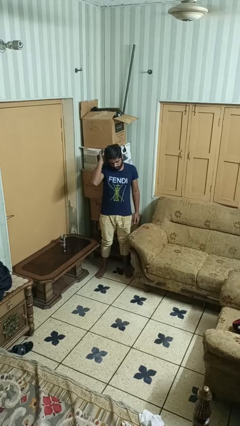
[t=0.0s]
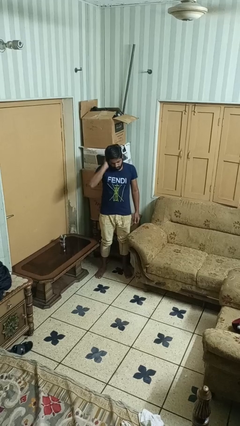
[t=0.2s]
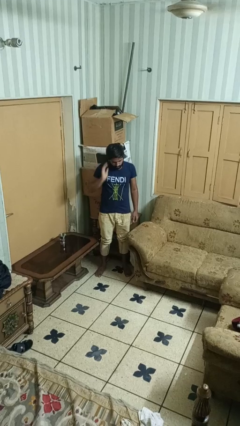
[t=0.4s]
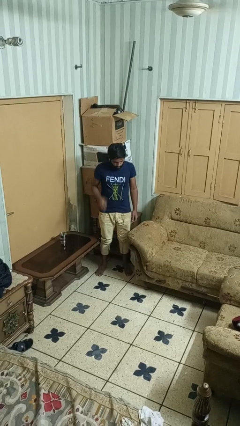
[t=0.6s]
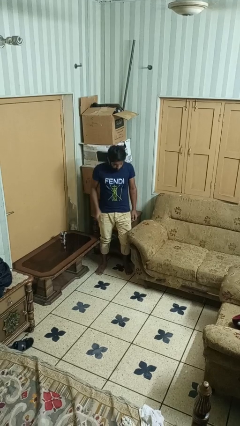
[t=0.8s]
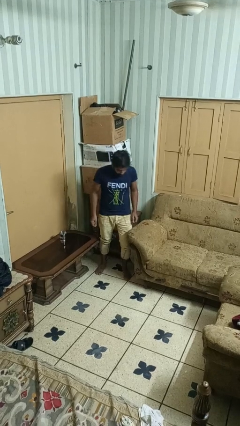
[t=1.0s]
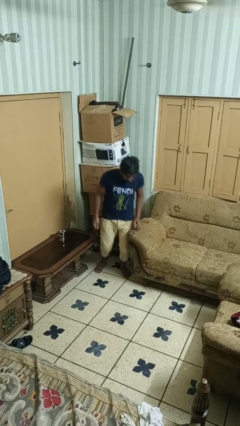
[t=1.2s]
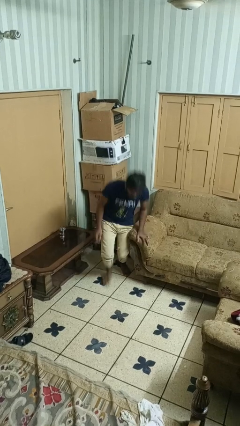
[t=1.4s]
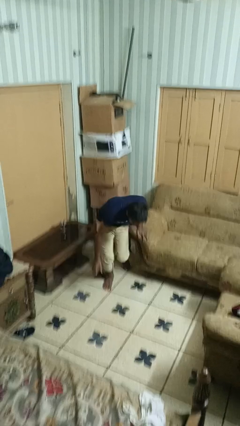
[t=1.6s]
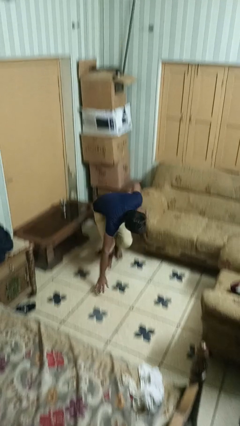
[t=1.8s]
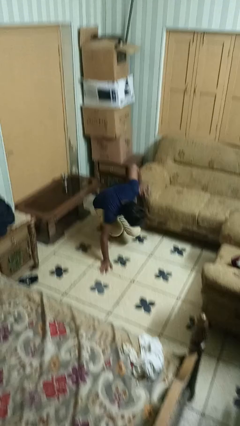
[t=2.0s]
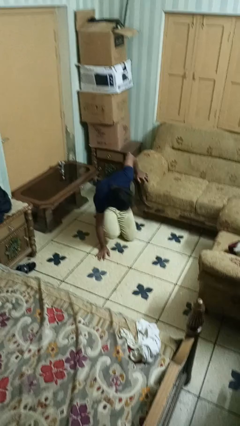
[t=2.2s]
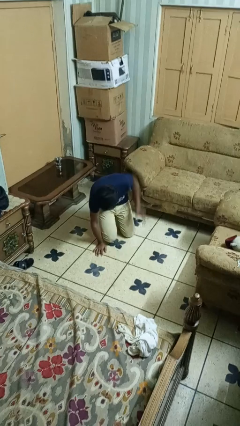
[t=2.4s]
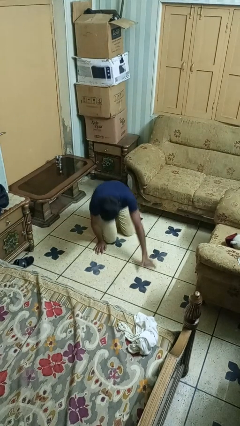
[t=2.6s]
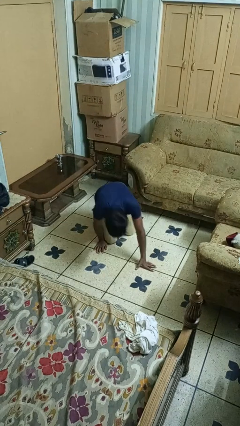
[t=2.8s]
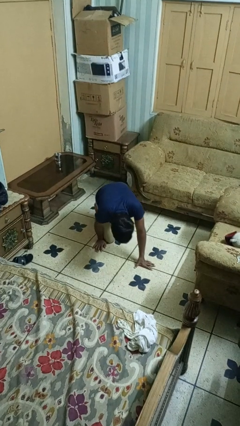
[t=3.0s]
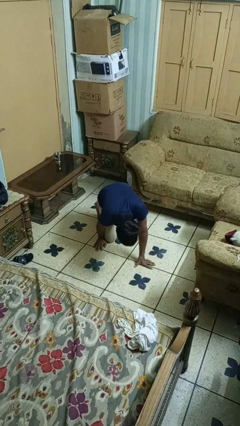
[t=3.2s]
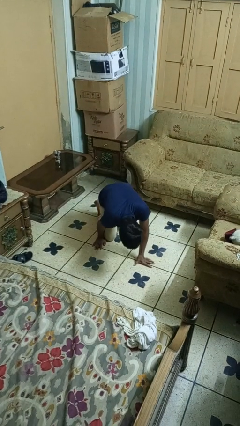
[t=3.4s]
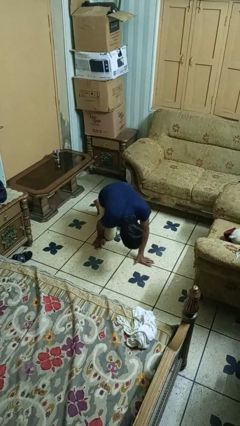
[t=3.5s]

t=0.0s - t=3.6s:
person trips on object on floor

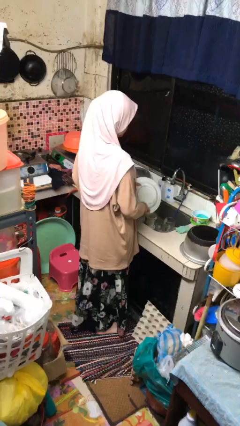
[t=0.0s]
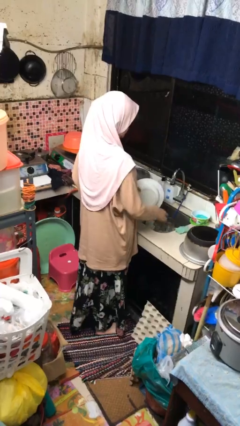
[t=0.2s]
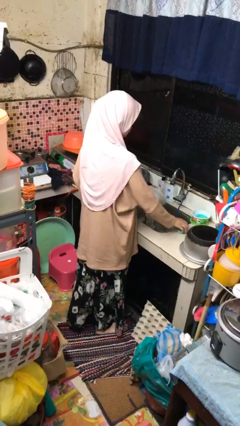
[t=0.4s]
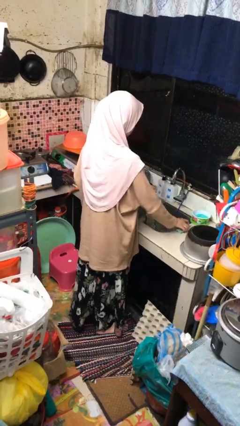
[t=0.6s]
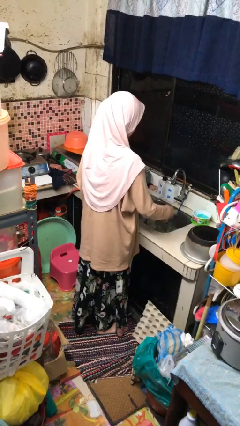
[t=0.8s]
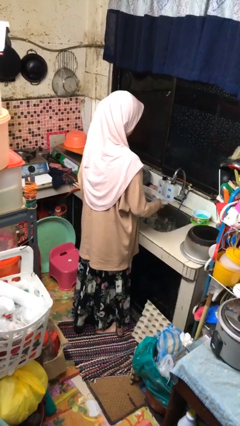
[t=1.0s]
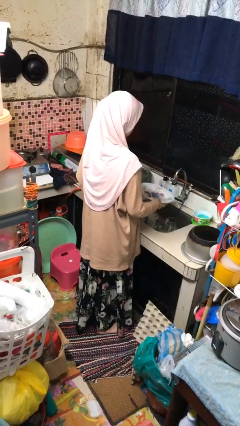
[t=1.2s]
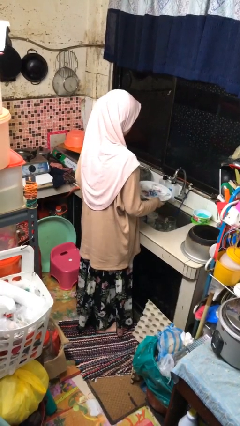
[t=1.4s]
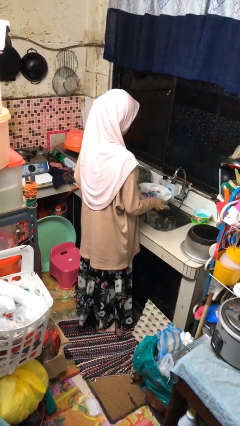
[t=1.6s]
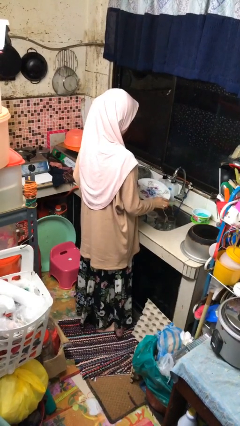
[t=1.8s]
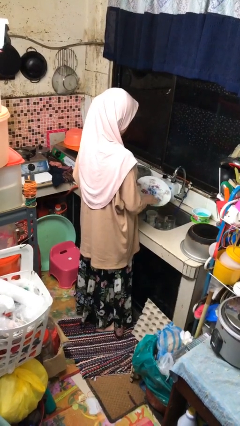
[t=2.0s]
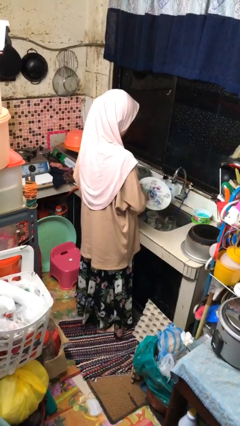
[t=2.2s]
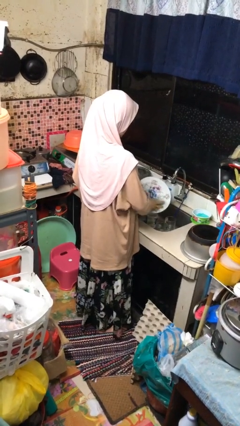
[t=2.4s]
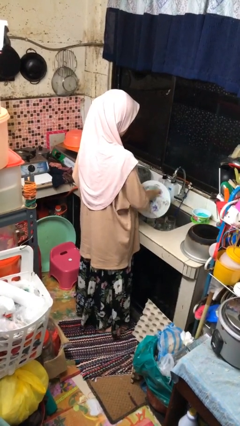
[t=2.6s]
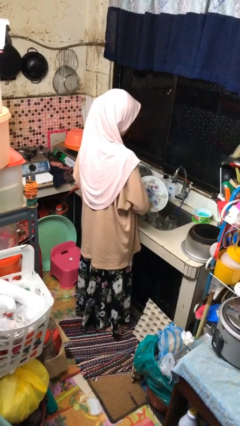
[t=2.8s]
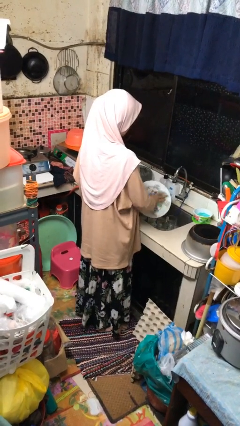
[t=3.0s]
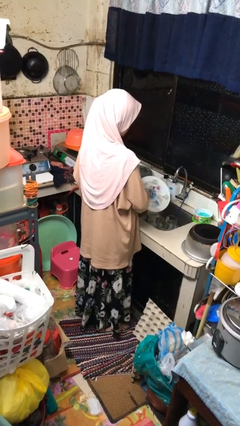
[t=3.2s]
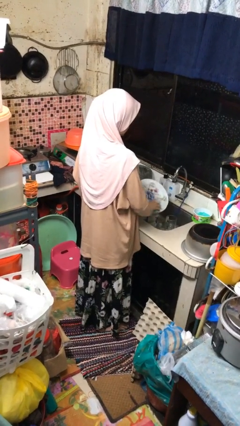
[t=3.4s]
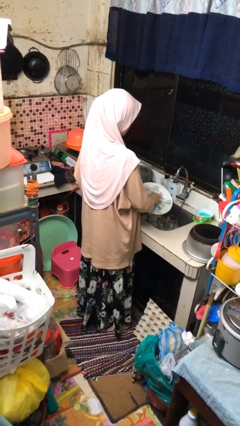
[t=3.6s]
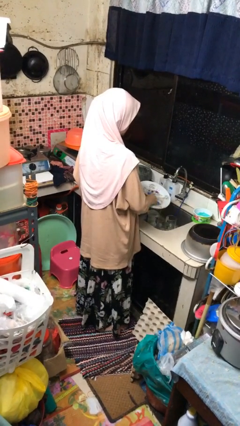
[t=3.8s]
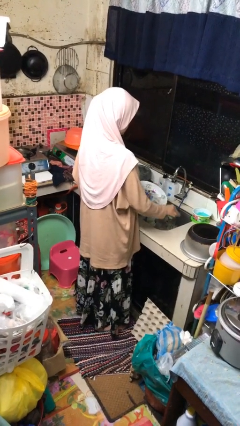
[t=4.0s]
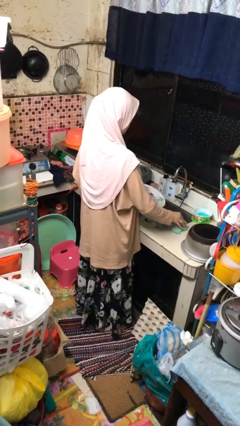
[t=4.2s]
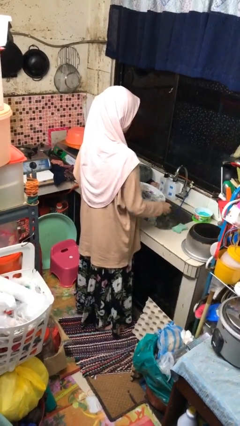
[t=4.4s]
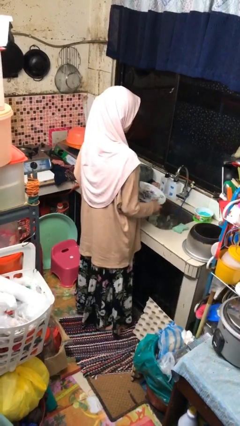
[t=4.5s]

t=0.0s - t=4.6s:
person washes dish

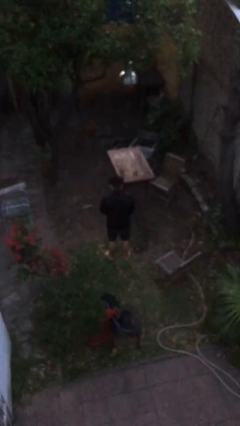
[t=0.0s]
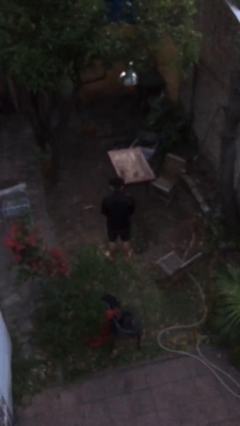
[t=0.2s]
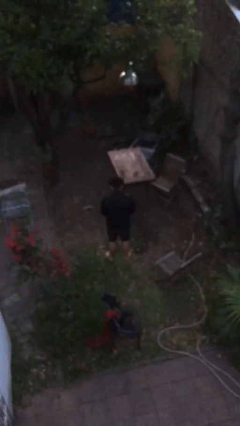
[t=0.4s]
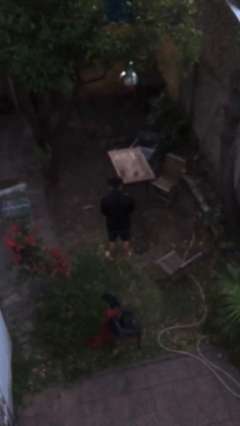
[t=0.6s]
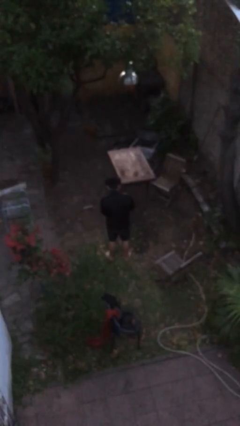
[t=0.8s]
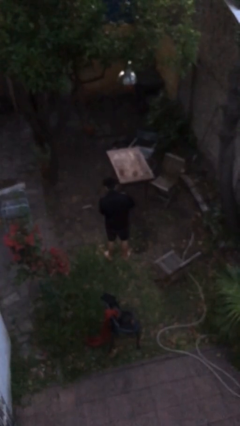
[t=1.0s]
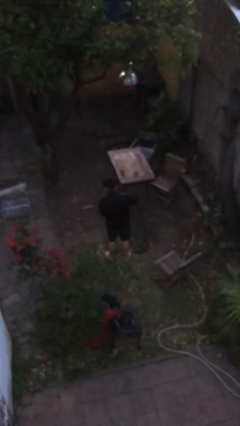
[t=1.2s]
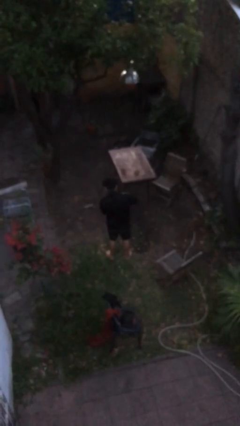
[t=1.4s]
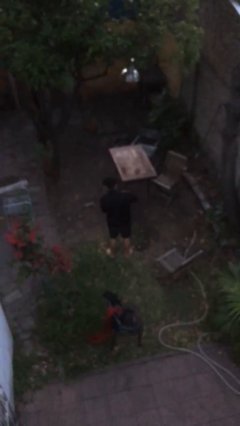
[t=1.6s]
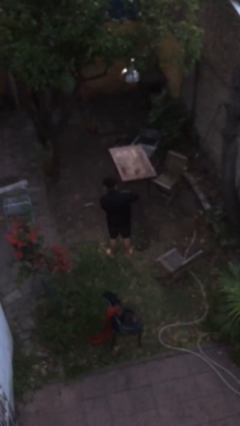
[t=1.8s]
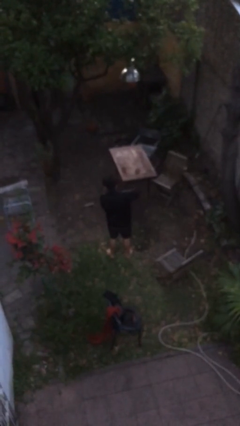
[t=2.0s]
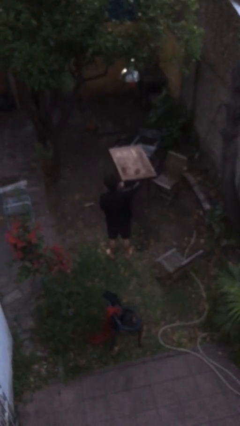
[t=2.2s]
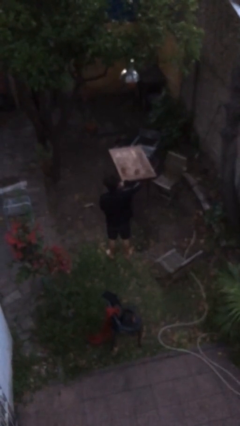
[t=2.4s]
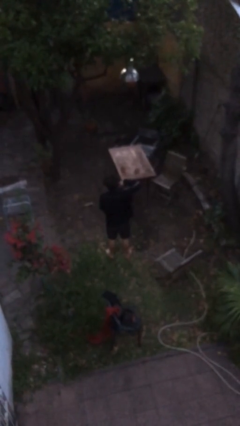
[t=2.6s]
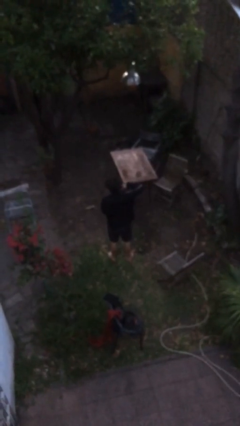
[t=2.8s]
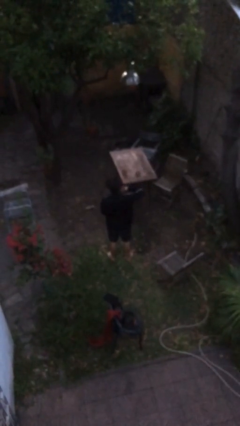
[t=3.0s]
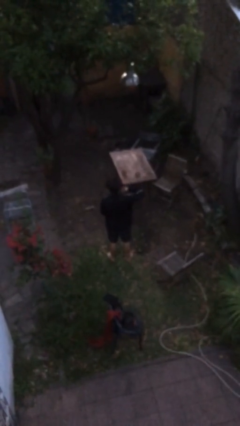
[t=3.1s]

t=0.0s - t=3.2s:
person zips up jacket

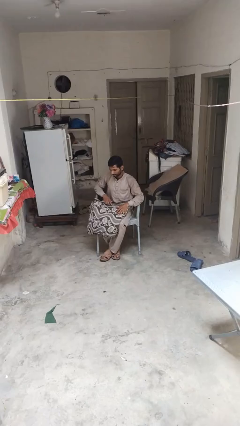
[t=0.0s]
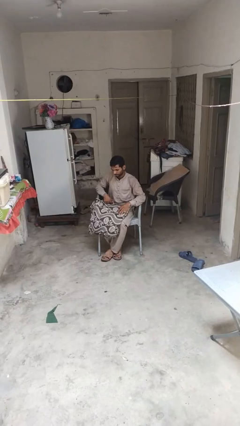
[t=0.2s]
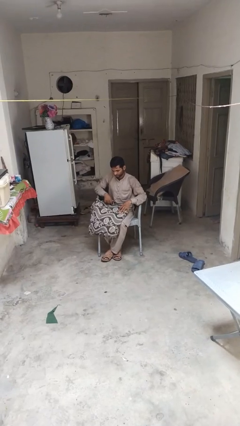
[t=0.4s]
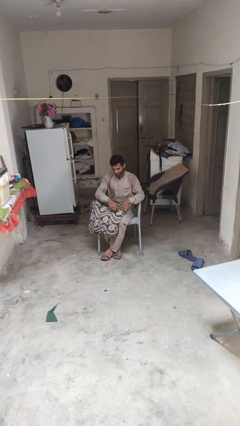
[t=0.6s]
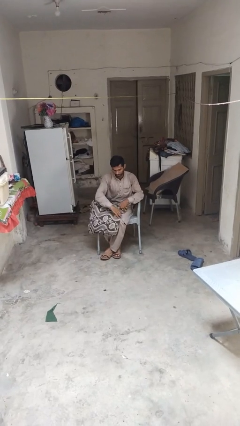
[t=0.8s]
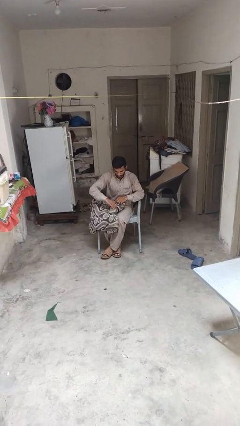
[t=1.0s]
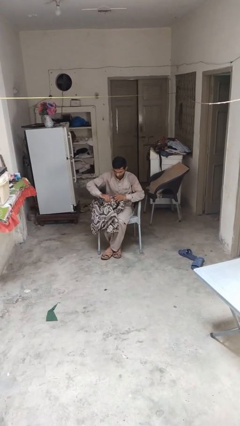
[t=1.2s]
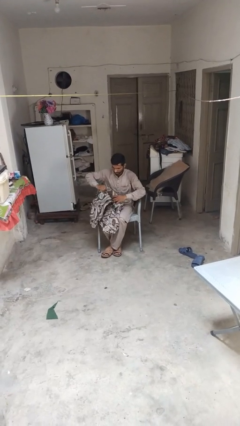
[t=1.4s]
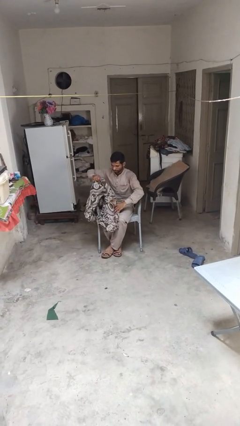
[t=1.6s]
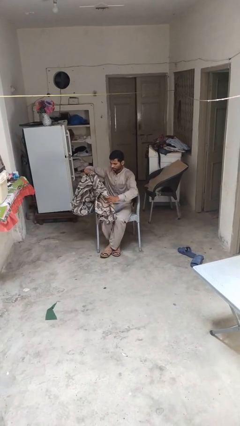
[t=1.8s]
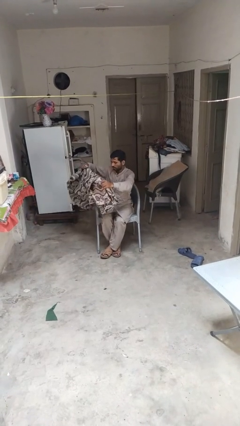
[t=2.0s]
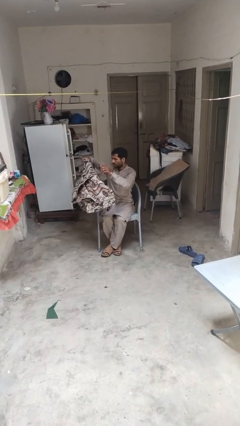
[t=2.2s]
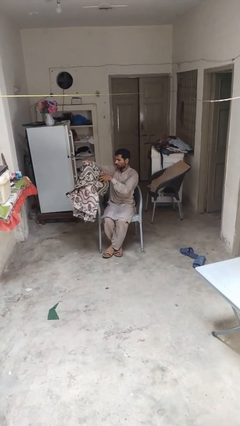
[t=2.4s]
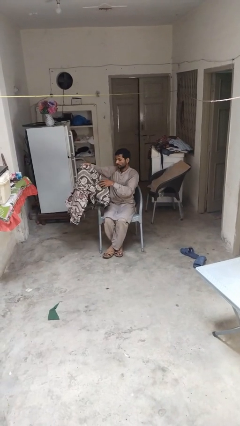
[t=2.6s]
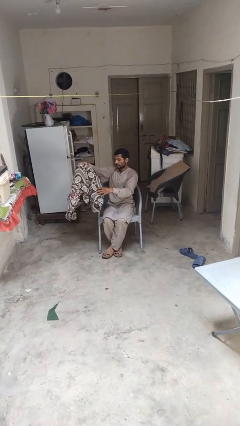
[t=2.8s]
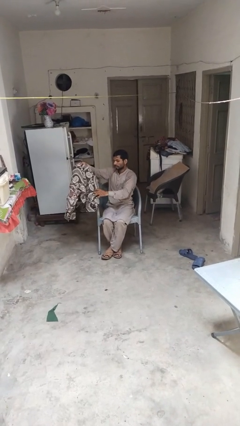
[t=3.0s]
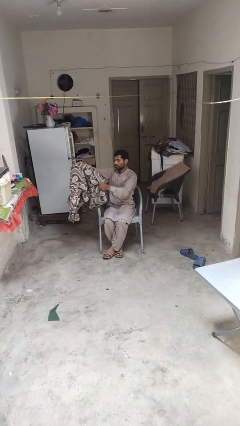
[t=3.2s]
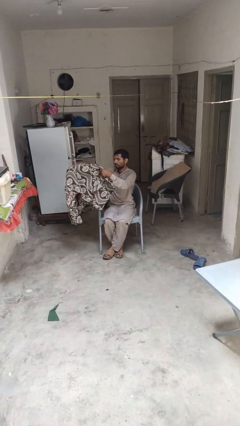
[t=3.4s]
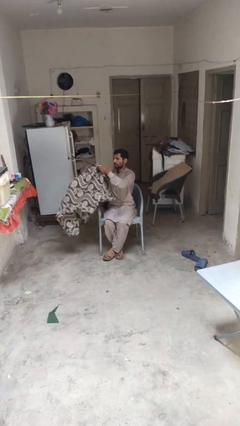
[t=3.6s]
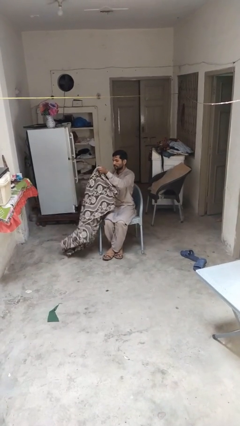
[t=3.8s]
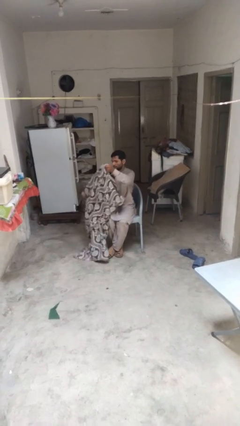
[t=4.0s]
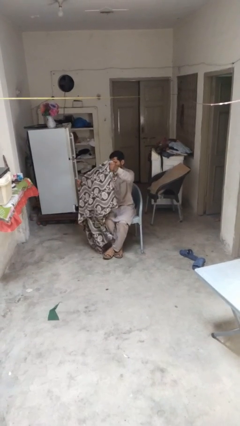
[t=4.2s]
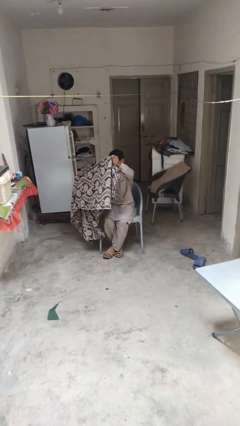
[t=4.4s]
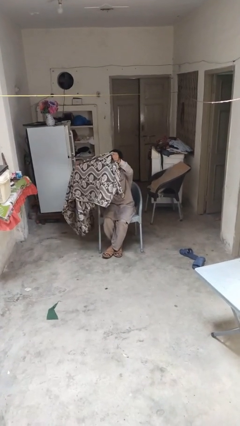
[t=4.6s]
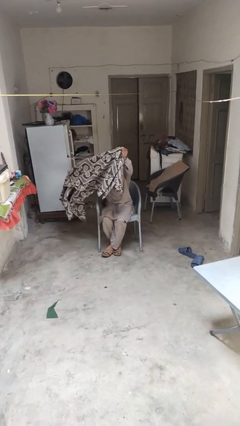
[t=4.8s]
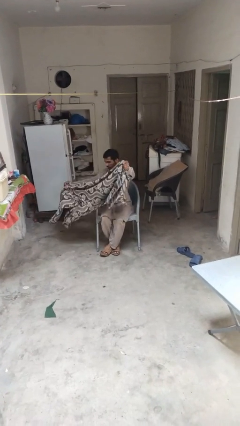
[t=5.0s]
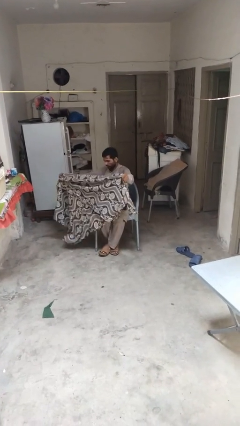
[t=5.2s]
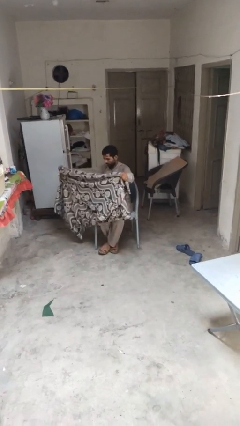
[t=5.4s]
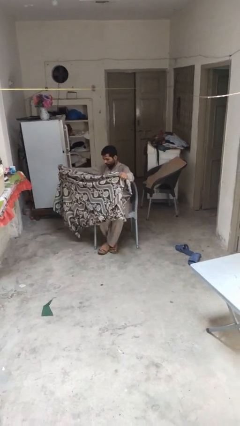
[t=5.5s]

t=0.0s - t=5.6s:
person unfolds blanket

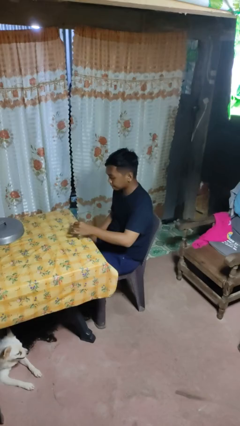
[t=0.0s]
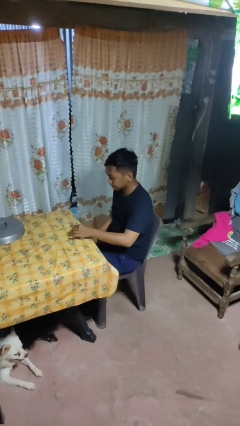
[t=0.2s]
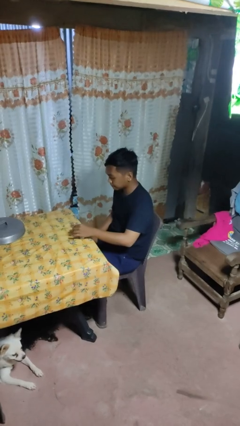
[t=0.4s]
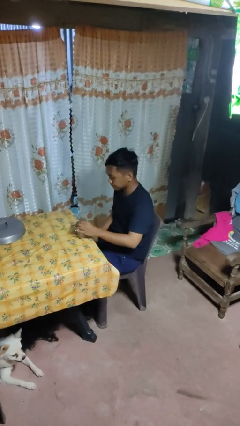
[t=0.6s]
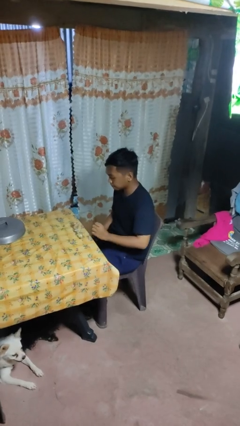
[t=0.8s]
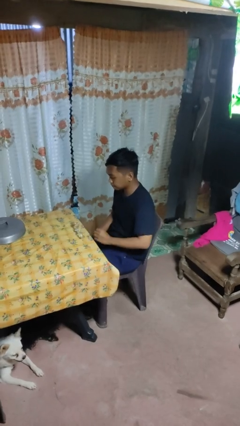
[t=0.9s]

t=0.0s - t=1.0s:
person puts down object on table
